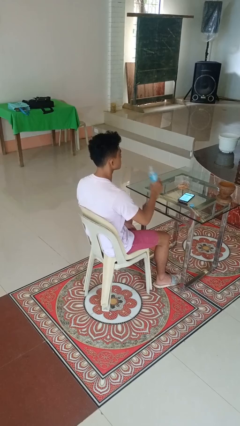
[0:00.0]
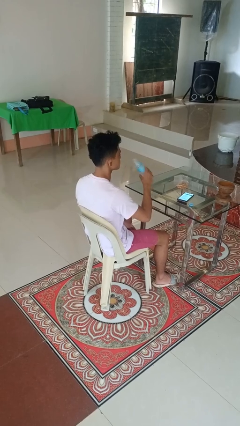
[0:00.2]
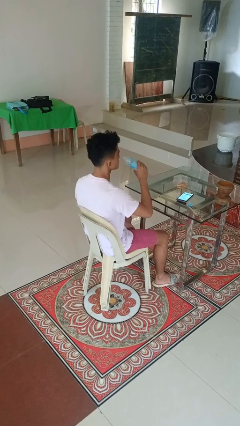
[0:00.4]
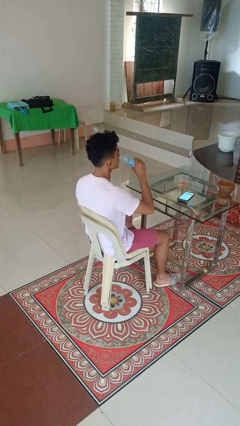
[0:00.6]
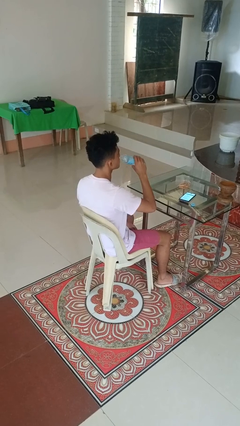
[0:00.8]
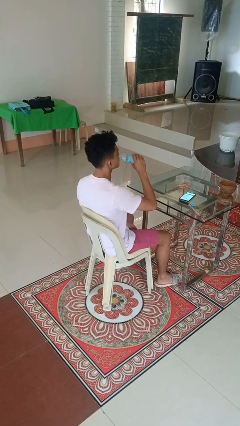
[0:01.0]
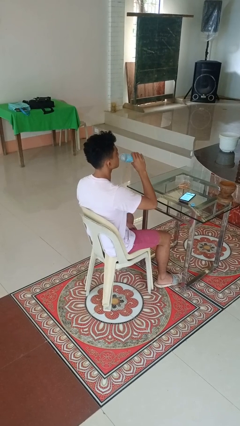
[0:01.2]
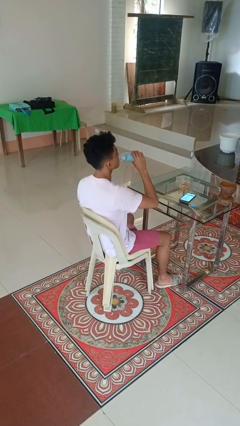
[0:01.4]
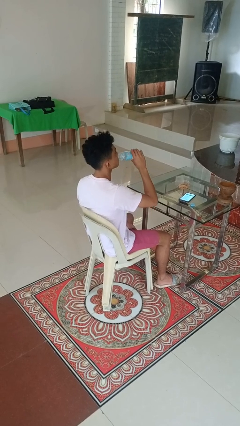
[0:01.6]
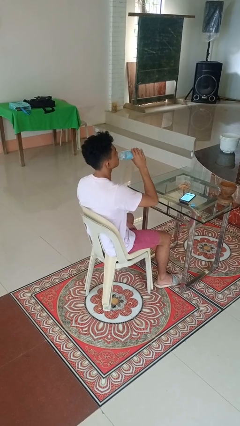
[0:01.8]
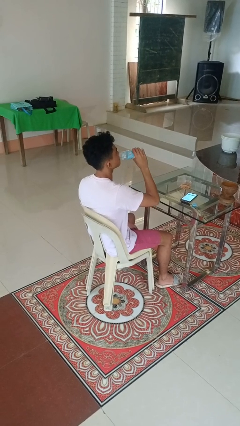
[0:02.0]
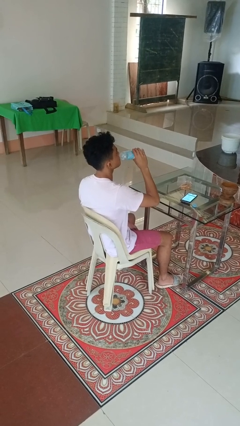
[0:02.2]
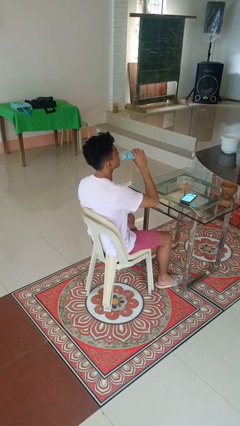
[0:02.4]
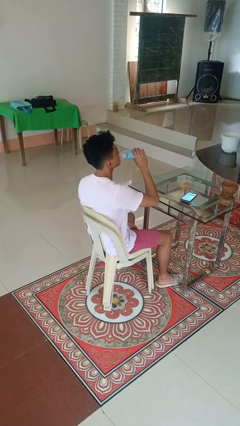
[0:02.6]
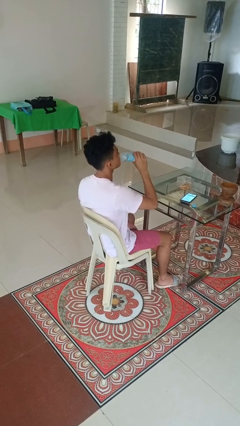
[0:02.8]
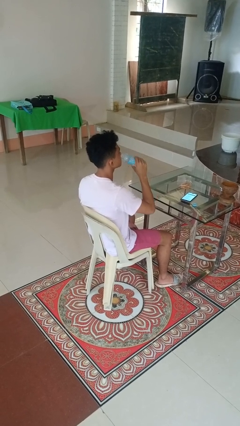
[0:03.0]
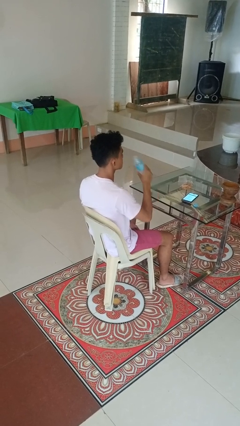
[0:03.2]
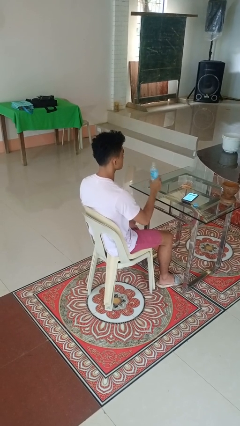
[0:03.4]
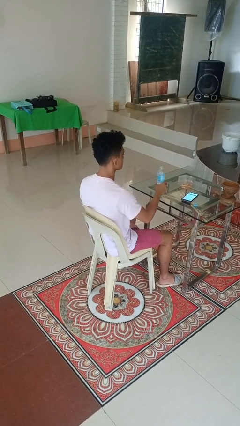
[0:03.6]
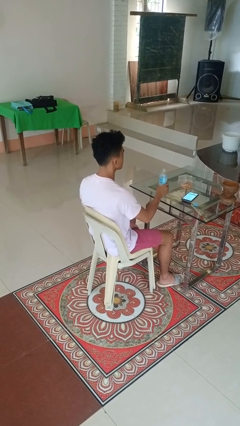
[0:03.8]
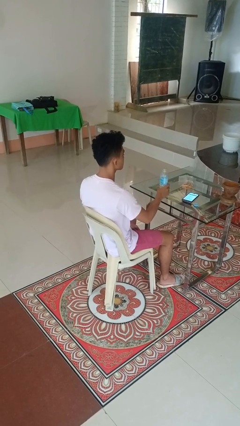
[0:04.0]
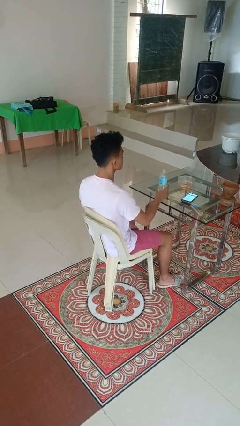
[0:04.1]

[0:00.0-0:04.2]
person drinks from bottle

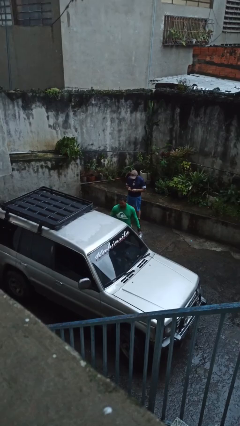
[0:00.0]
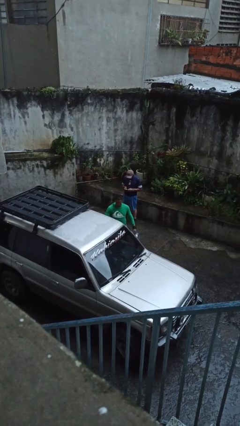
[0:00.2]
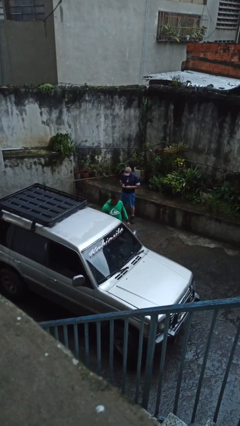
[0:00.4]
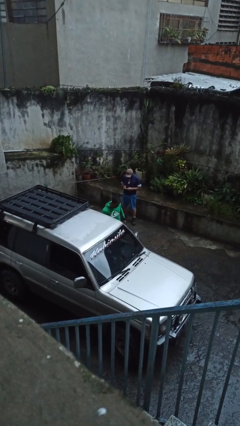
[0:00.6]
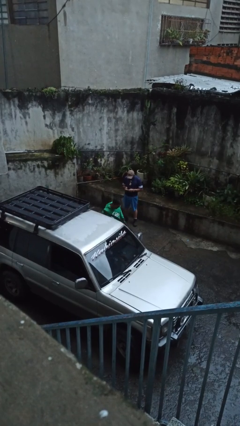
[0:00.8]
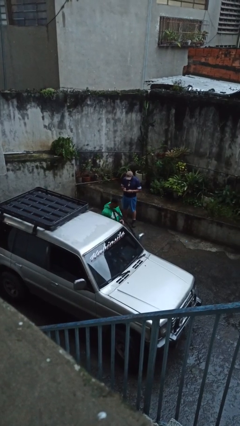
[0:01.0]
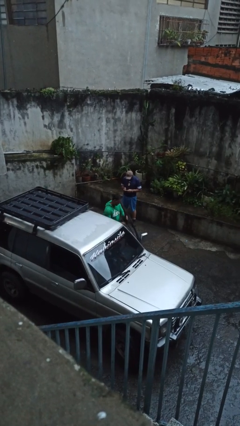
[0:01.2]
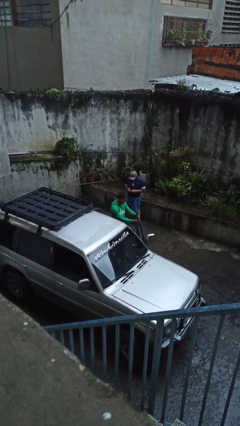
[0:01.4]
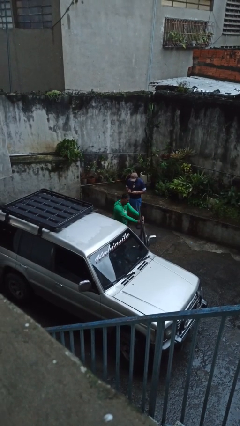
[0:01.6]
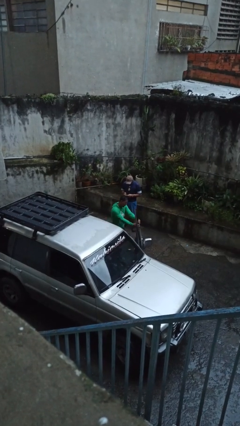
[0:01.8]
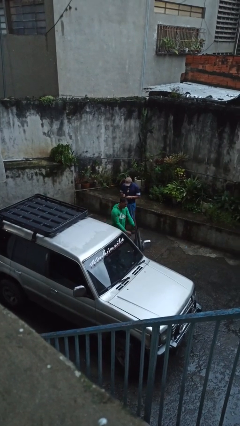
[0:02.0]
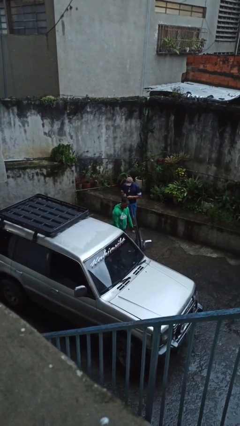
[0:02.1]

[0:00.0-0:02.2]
person opens car door

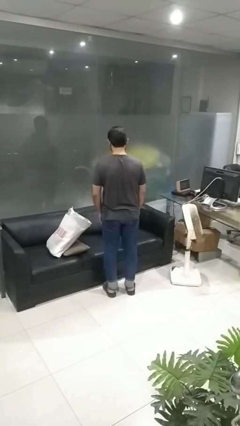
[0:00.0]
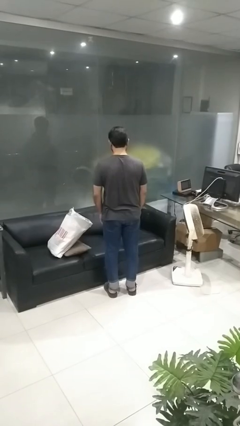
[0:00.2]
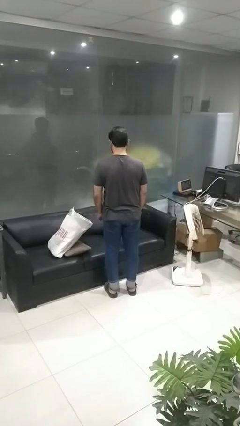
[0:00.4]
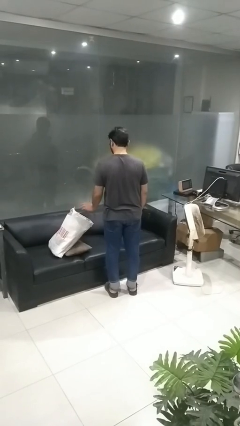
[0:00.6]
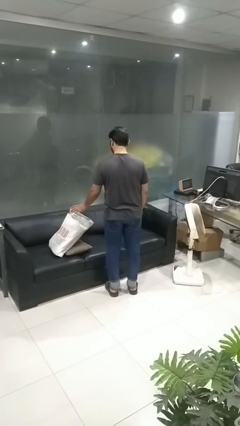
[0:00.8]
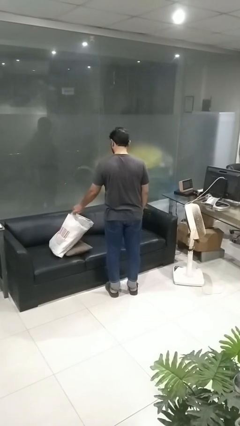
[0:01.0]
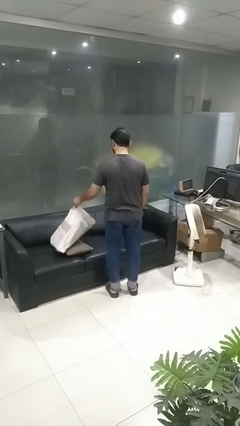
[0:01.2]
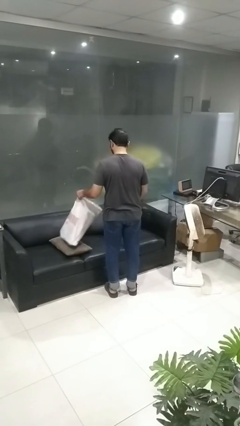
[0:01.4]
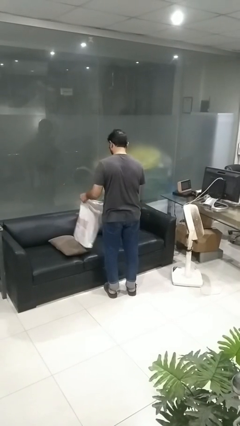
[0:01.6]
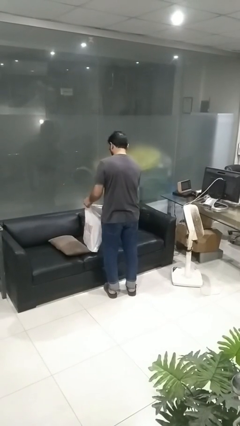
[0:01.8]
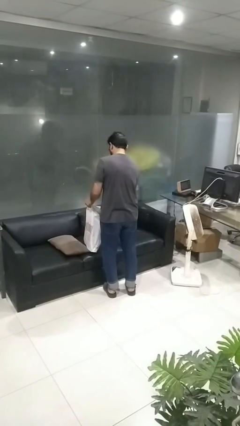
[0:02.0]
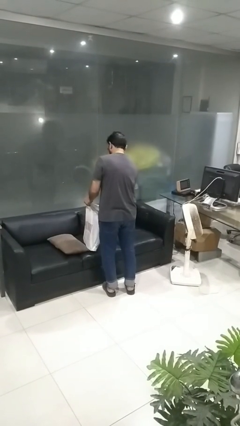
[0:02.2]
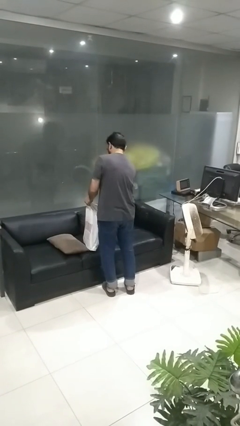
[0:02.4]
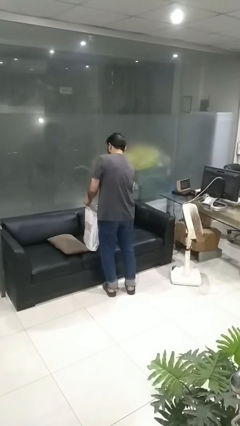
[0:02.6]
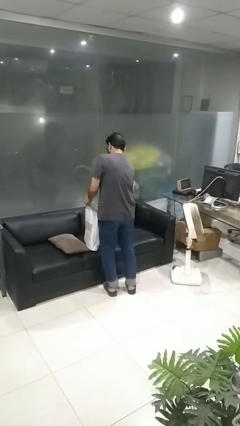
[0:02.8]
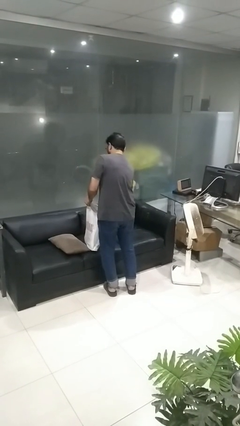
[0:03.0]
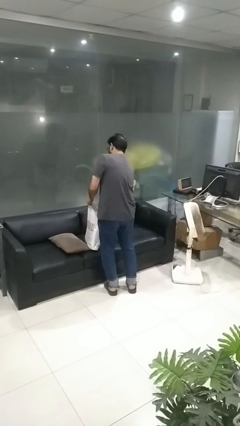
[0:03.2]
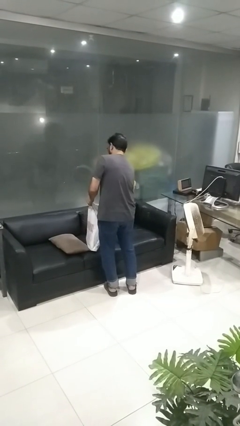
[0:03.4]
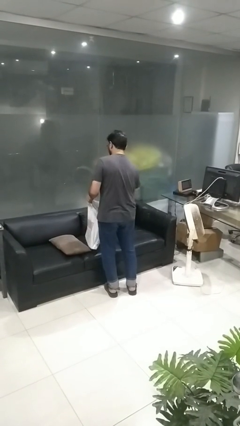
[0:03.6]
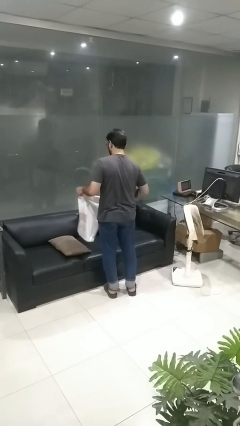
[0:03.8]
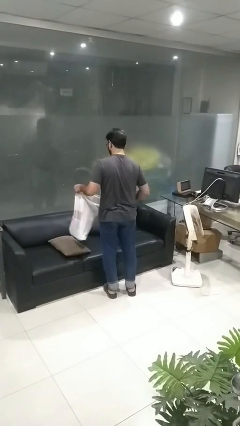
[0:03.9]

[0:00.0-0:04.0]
person searches in bag

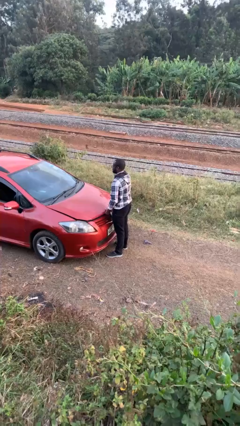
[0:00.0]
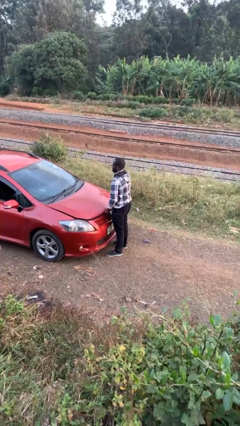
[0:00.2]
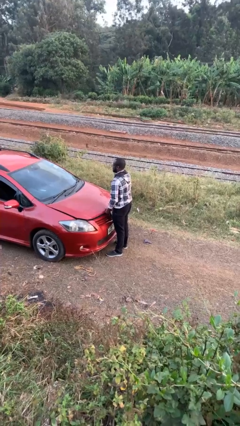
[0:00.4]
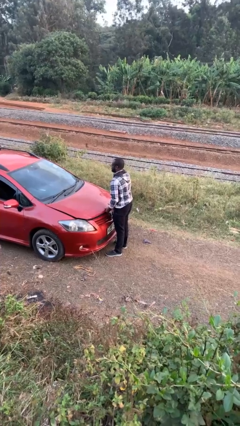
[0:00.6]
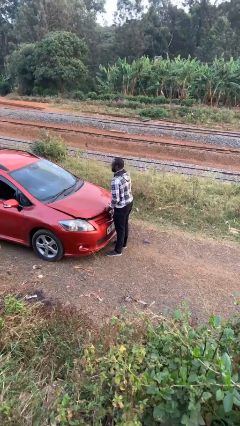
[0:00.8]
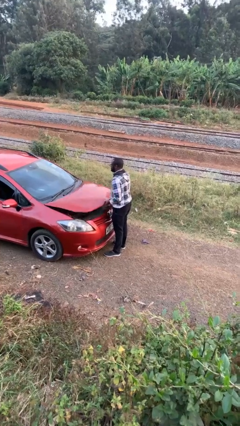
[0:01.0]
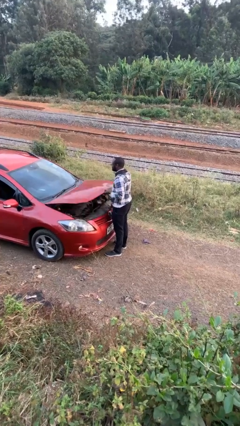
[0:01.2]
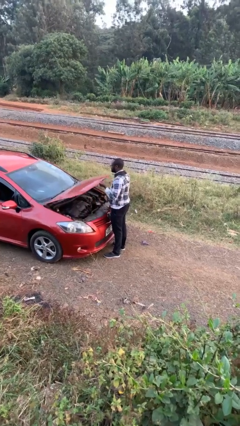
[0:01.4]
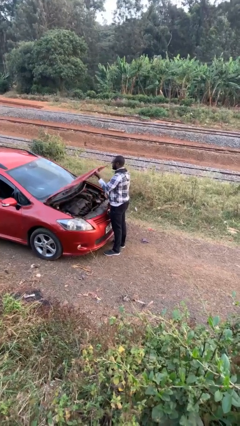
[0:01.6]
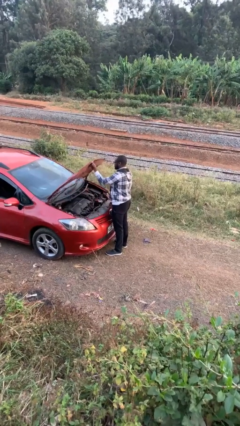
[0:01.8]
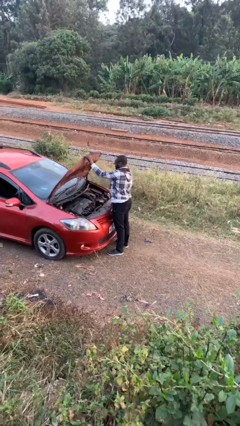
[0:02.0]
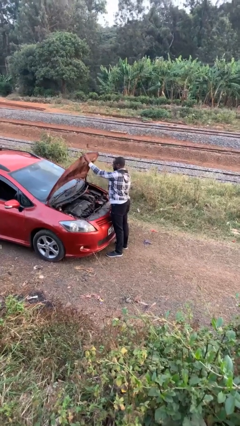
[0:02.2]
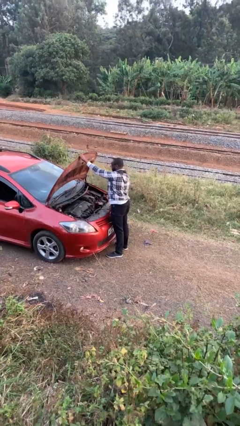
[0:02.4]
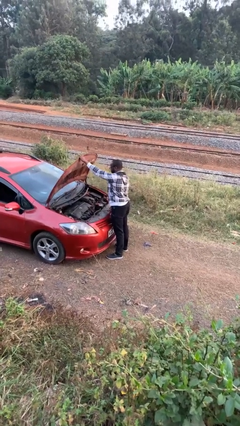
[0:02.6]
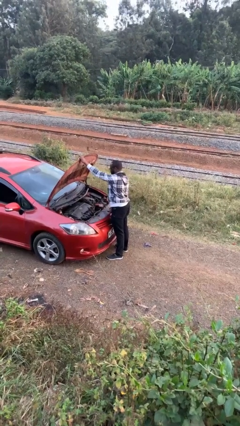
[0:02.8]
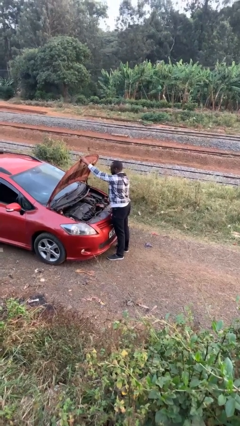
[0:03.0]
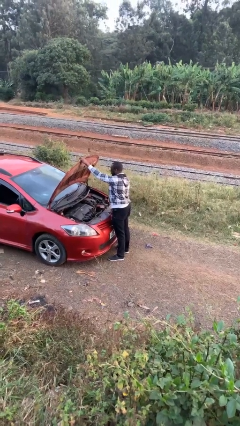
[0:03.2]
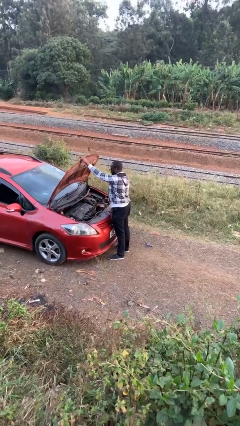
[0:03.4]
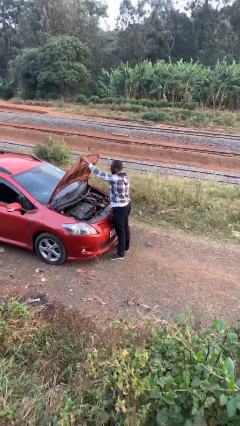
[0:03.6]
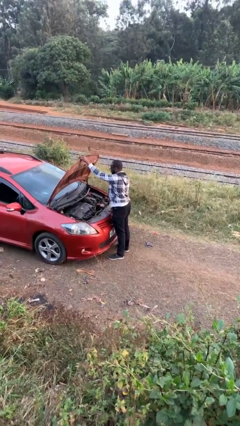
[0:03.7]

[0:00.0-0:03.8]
person opens car hood

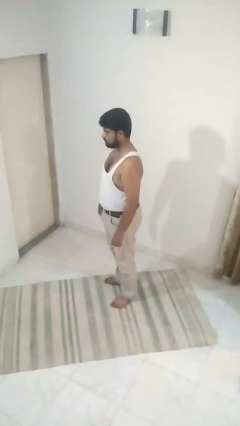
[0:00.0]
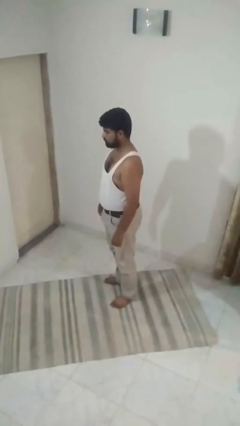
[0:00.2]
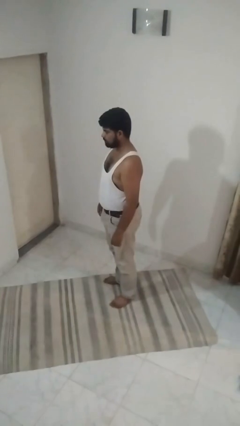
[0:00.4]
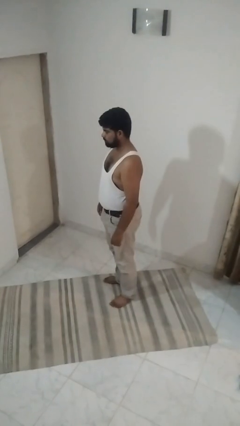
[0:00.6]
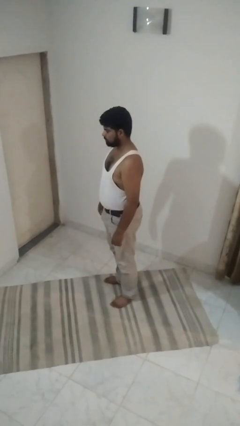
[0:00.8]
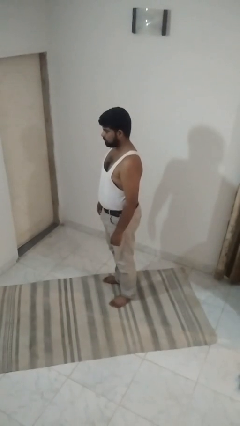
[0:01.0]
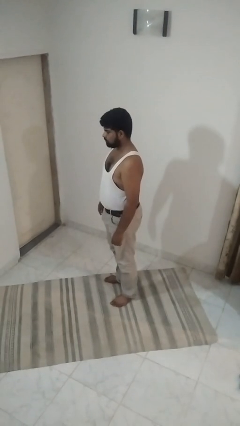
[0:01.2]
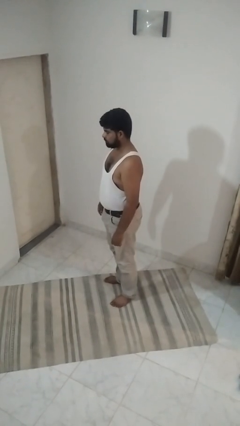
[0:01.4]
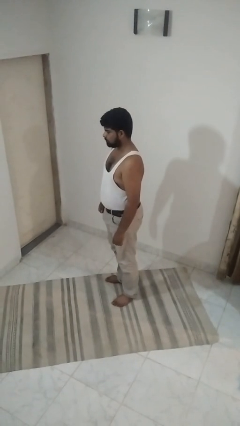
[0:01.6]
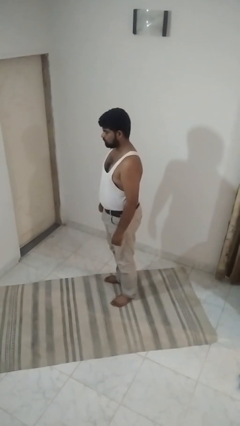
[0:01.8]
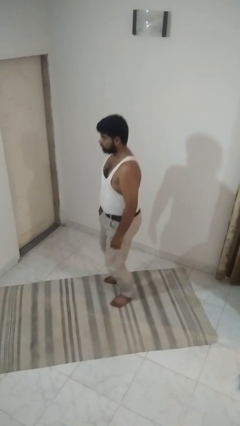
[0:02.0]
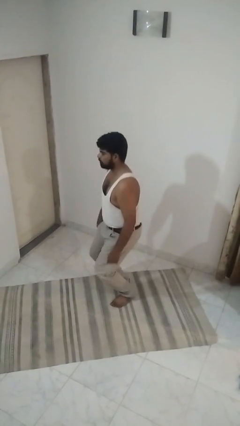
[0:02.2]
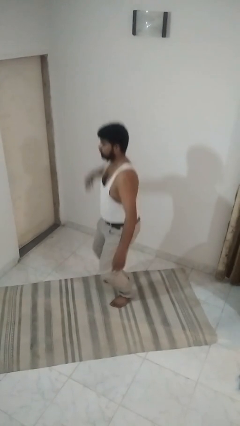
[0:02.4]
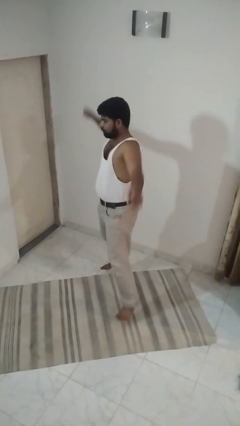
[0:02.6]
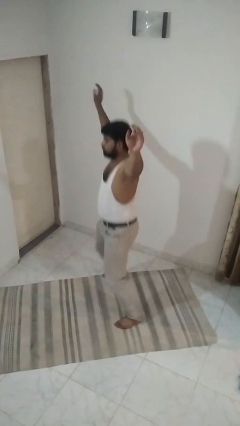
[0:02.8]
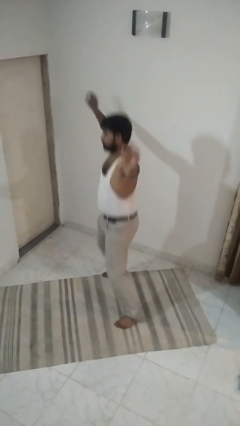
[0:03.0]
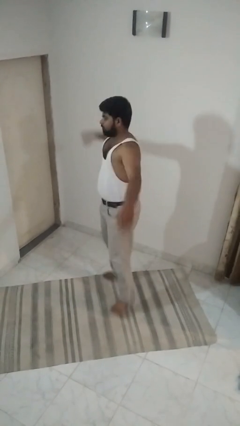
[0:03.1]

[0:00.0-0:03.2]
person exercises with jumping jacks
